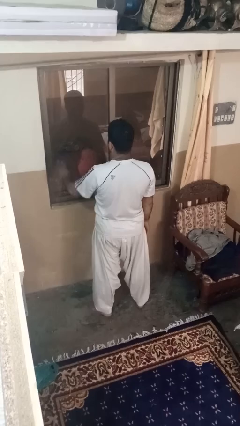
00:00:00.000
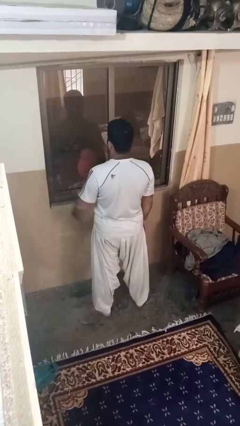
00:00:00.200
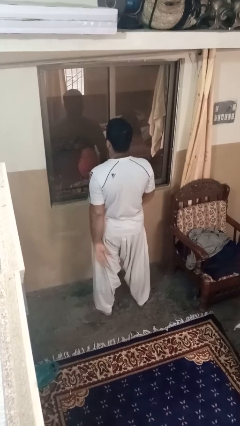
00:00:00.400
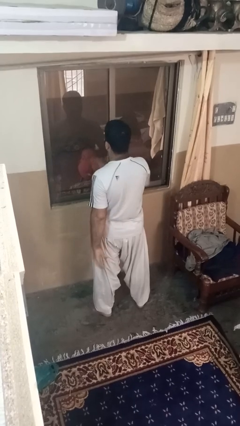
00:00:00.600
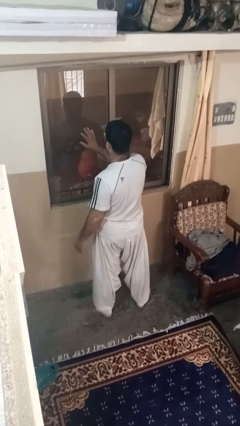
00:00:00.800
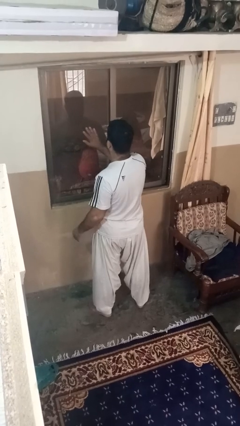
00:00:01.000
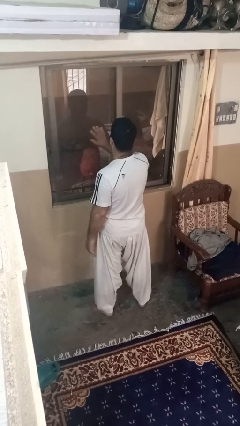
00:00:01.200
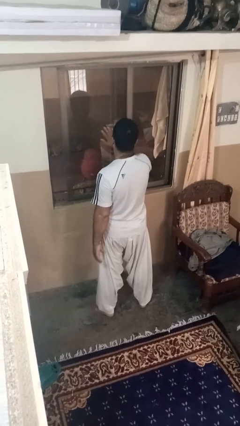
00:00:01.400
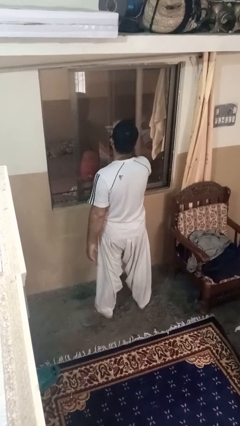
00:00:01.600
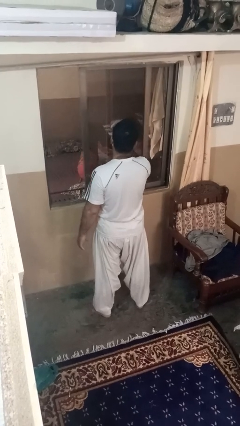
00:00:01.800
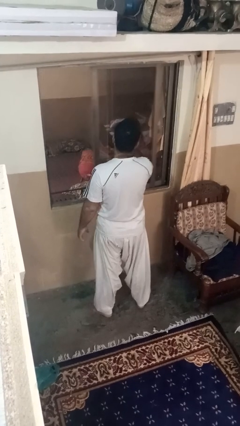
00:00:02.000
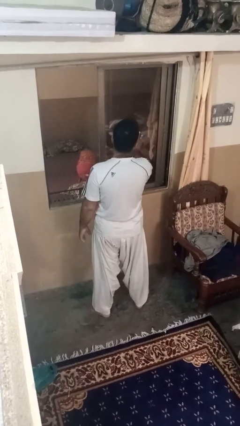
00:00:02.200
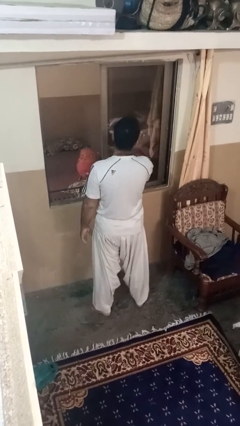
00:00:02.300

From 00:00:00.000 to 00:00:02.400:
person opens home window

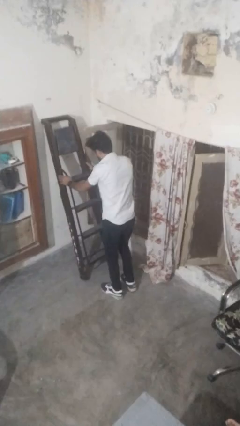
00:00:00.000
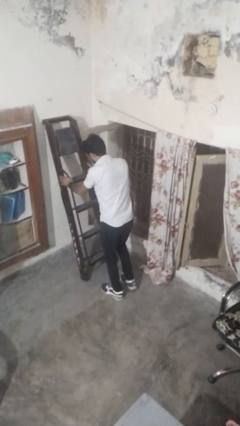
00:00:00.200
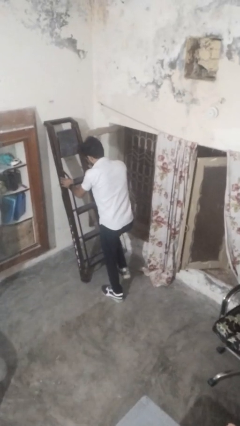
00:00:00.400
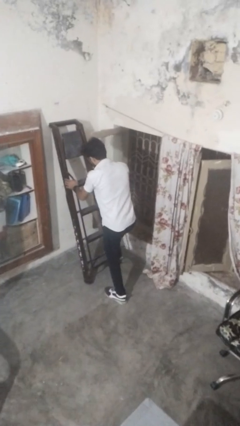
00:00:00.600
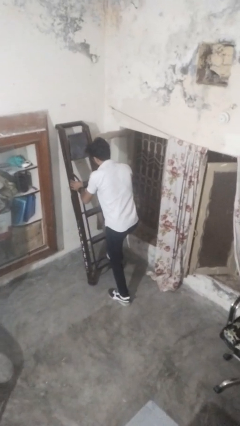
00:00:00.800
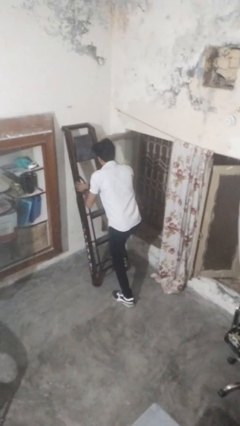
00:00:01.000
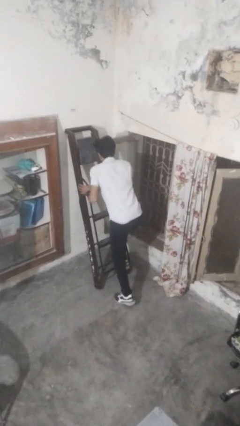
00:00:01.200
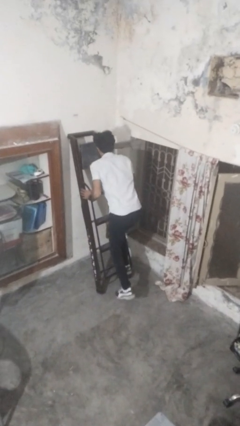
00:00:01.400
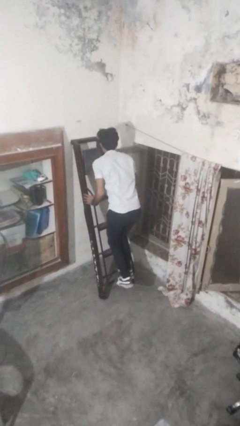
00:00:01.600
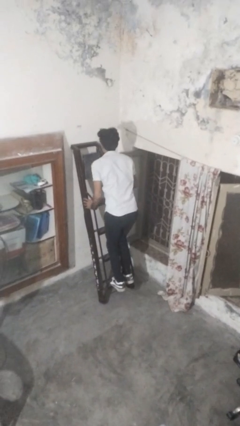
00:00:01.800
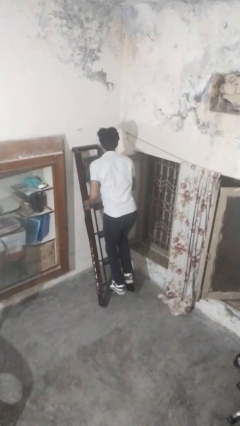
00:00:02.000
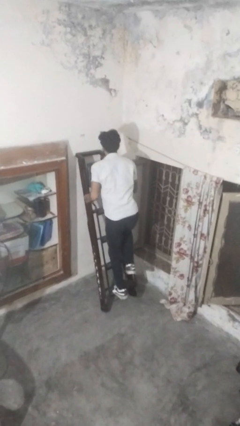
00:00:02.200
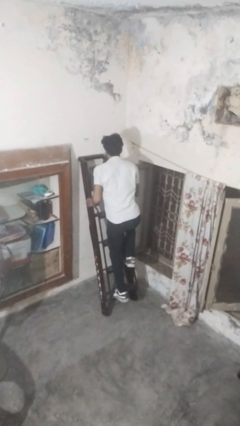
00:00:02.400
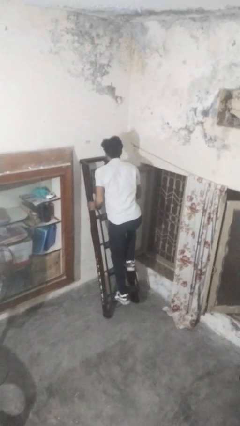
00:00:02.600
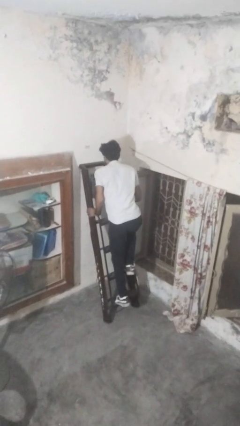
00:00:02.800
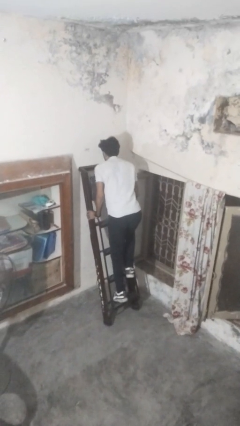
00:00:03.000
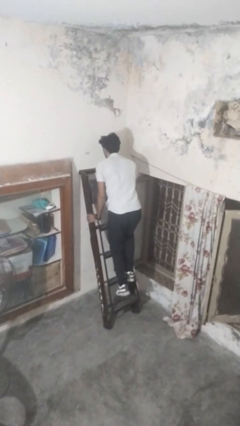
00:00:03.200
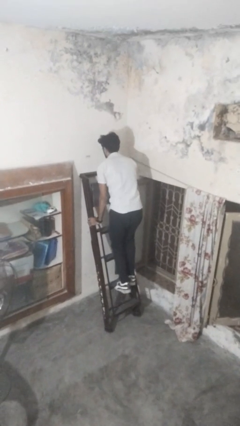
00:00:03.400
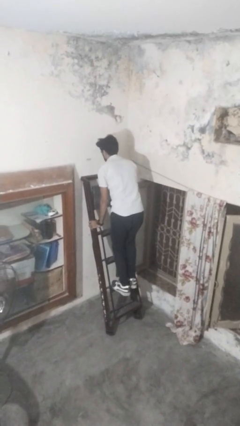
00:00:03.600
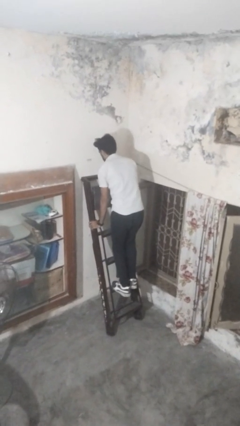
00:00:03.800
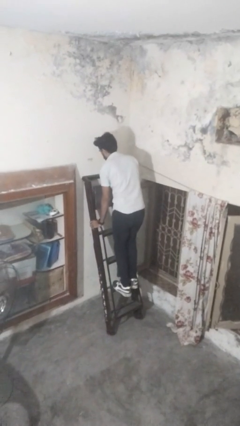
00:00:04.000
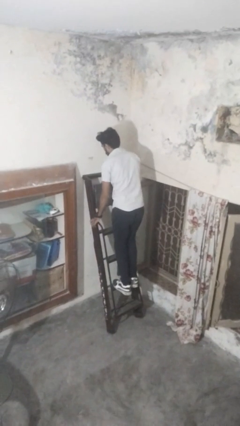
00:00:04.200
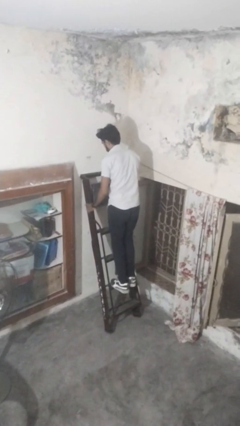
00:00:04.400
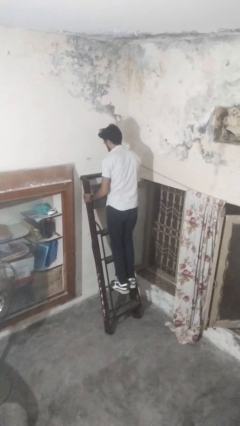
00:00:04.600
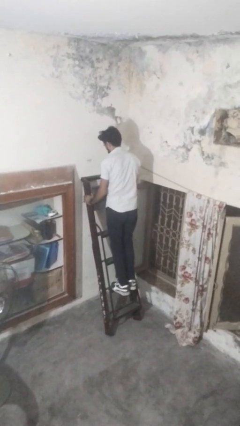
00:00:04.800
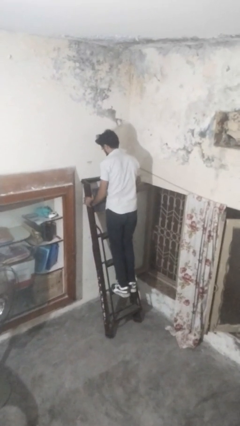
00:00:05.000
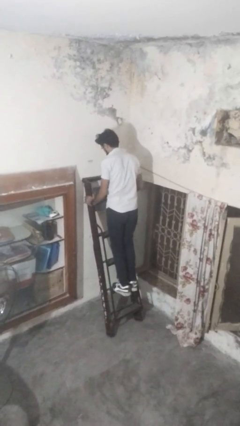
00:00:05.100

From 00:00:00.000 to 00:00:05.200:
person climbs up ladder

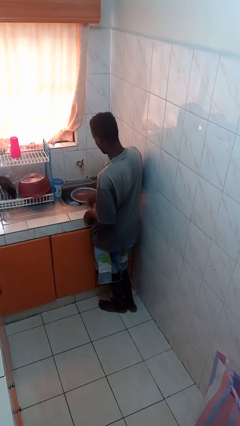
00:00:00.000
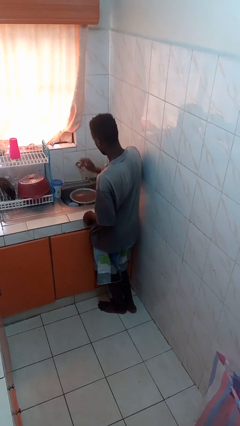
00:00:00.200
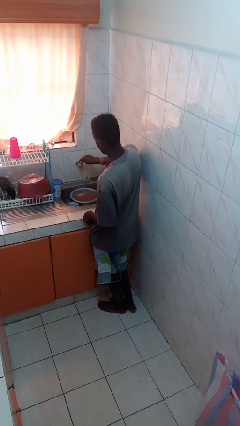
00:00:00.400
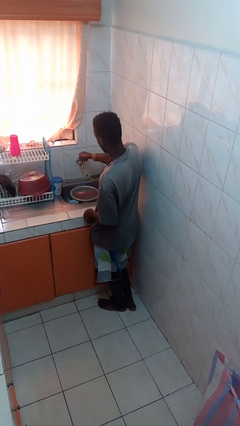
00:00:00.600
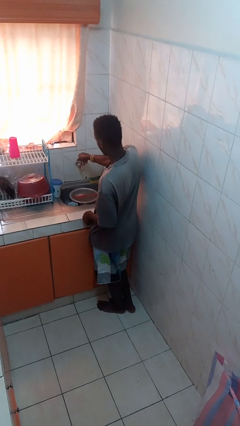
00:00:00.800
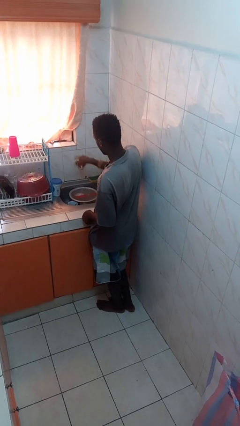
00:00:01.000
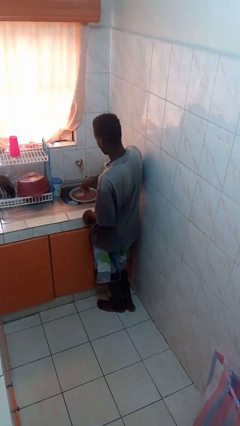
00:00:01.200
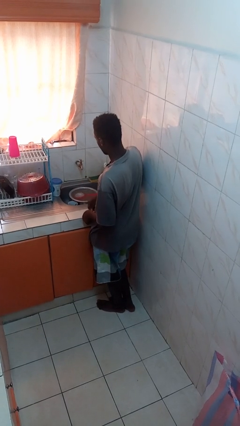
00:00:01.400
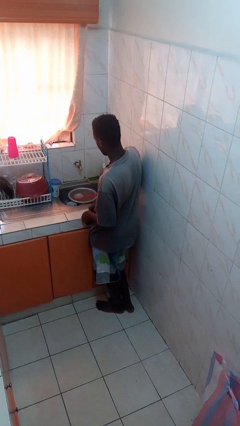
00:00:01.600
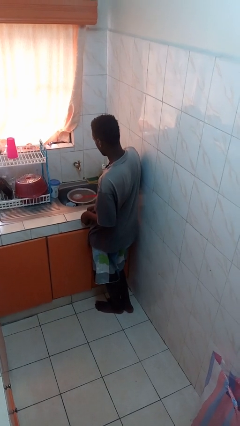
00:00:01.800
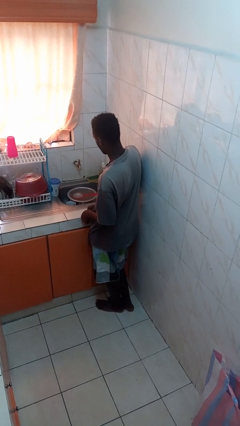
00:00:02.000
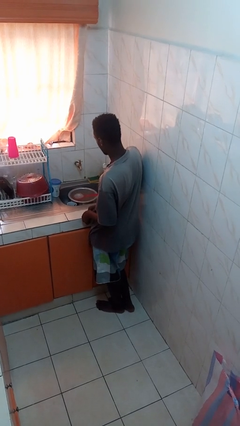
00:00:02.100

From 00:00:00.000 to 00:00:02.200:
person turns off faucet

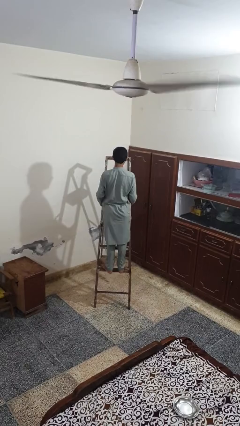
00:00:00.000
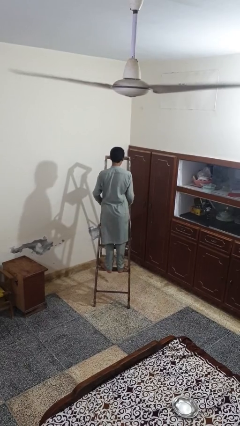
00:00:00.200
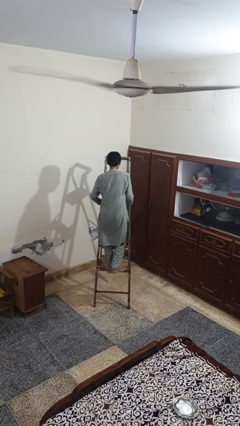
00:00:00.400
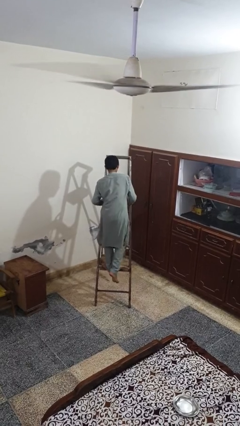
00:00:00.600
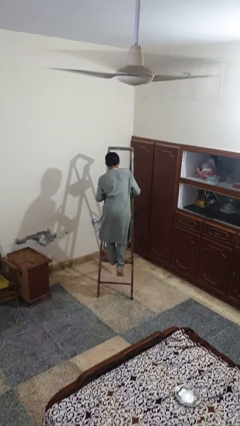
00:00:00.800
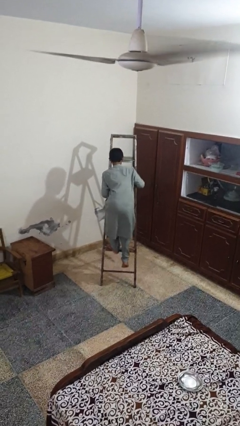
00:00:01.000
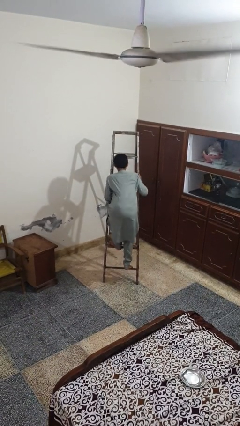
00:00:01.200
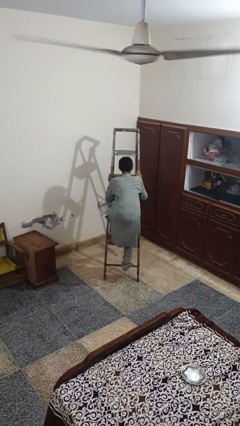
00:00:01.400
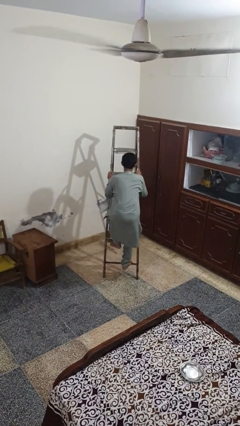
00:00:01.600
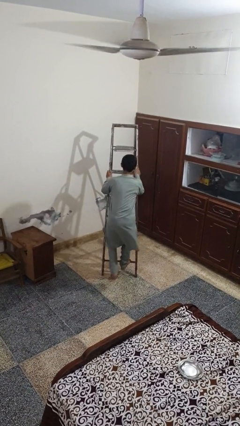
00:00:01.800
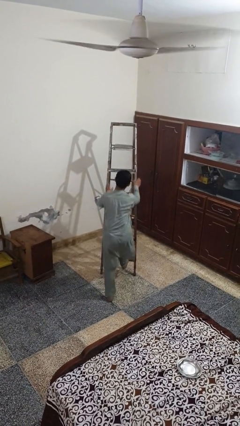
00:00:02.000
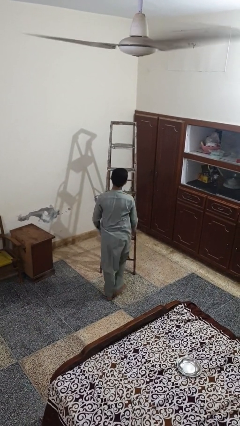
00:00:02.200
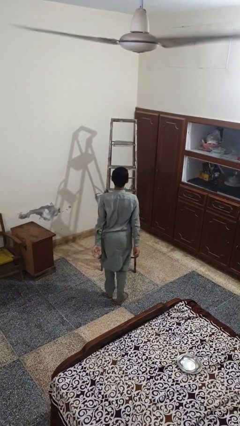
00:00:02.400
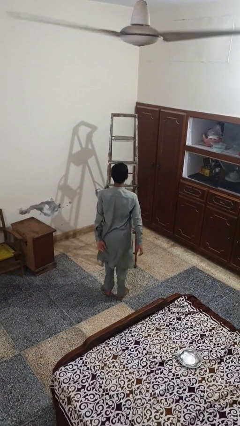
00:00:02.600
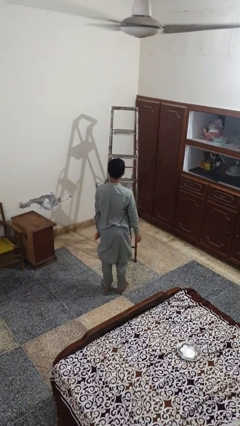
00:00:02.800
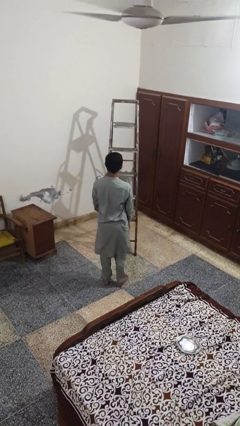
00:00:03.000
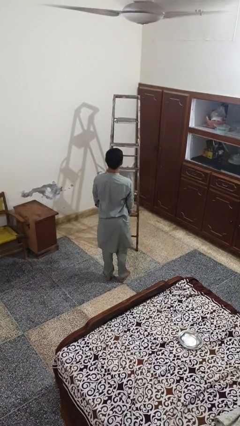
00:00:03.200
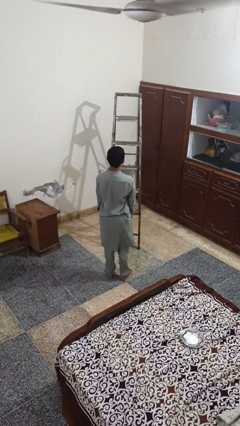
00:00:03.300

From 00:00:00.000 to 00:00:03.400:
person climbs down ladder

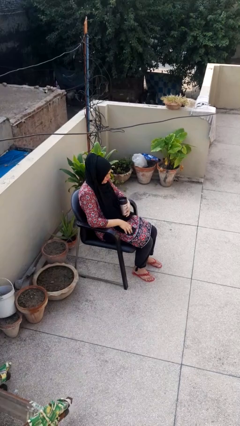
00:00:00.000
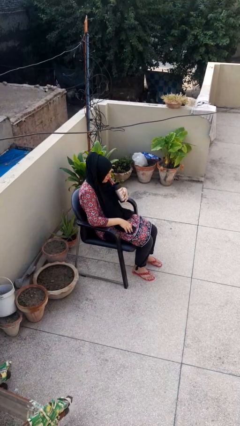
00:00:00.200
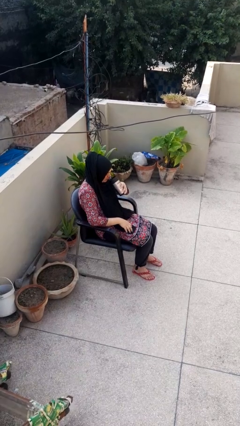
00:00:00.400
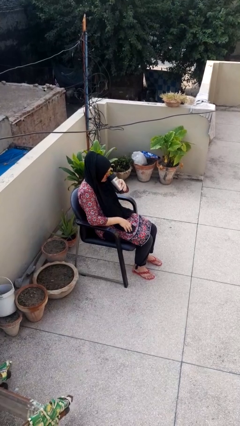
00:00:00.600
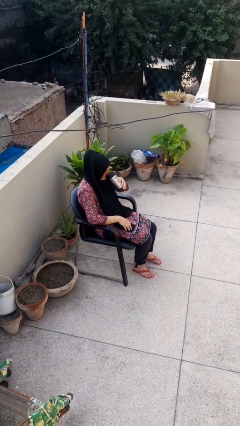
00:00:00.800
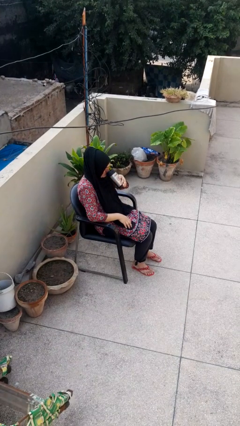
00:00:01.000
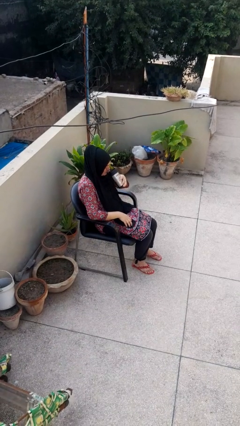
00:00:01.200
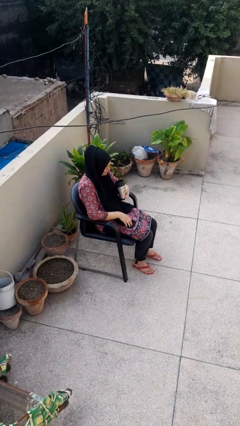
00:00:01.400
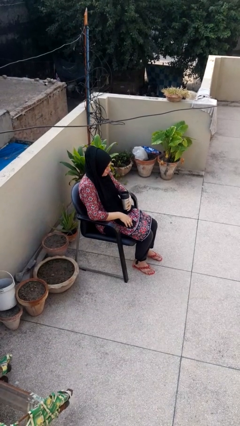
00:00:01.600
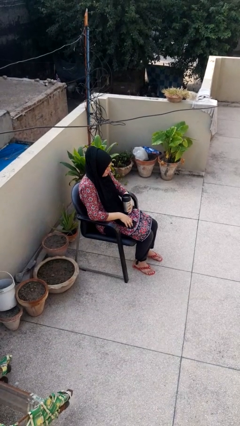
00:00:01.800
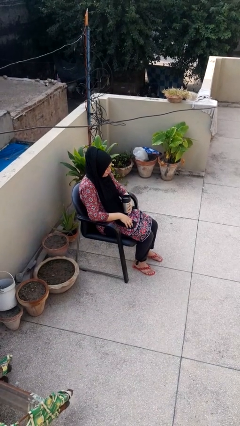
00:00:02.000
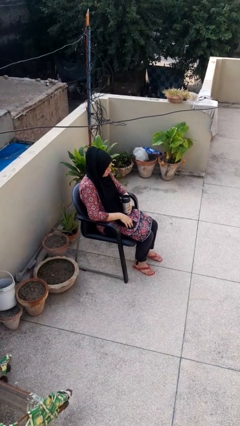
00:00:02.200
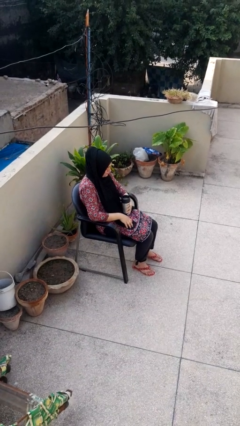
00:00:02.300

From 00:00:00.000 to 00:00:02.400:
person drinks from beverage can

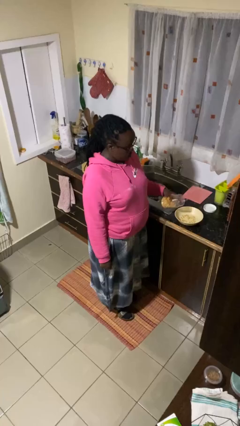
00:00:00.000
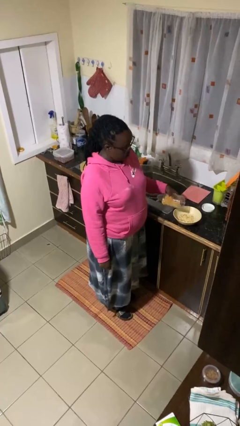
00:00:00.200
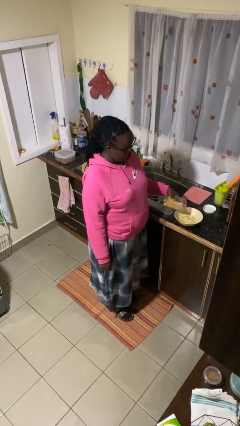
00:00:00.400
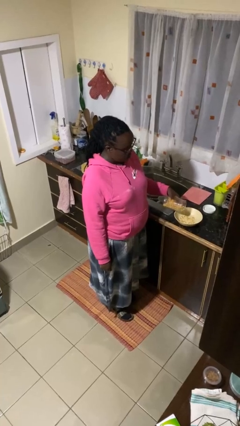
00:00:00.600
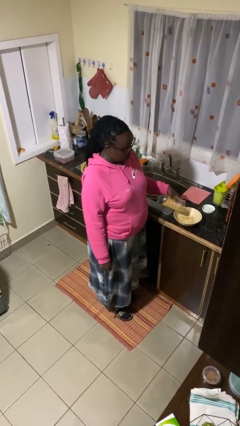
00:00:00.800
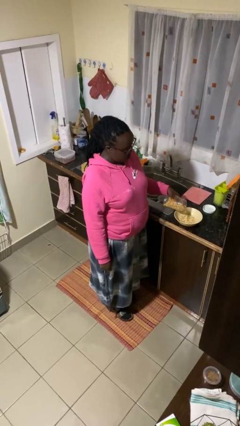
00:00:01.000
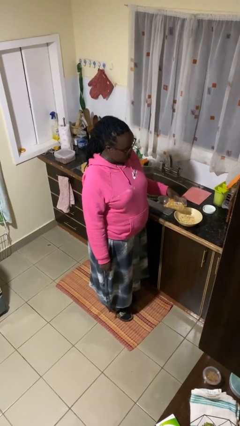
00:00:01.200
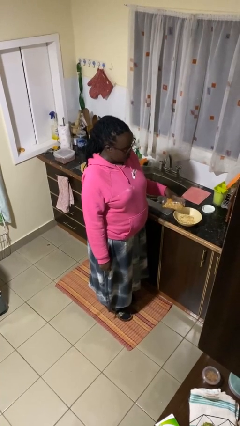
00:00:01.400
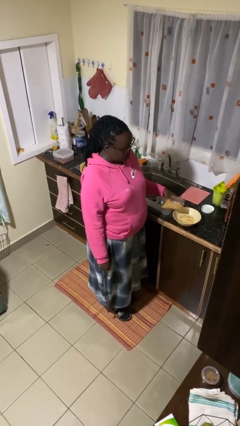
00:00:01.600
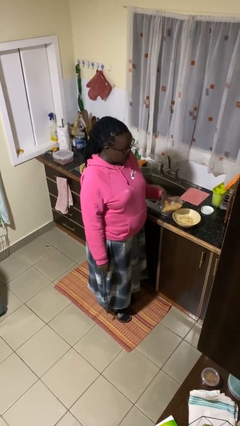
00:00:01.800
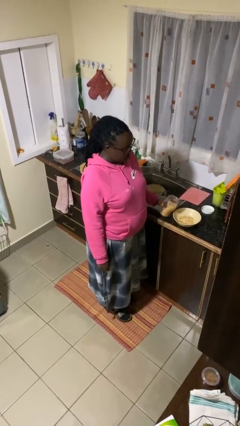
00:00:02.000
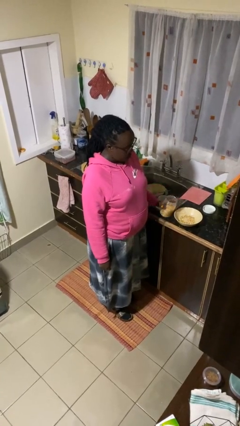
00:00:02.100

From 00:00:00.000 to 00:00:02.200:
person pours into bowl
